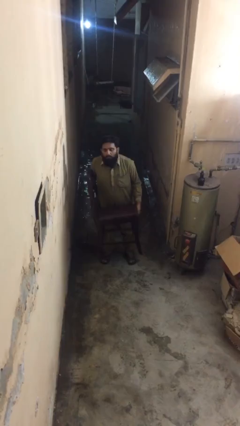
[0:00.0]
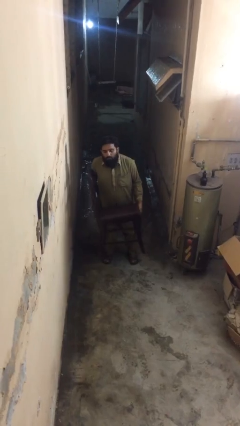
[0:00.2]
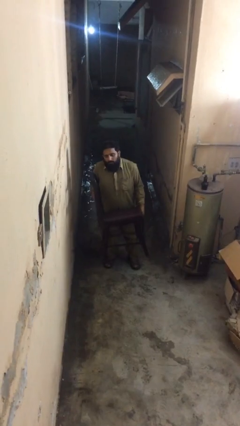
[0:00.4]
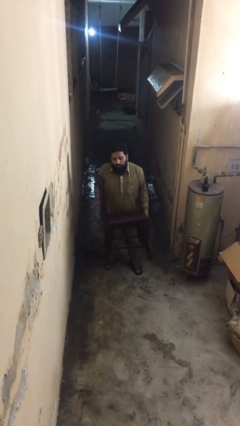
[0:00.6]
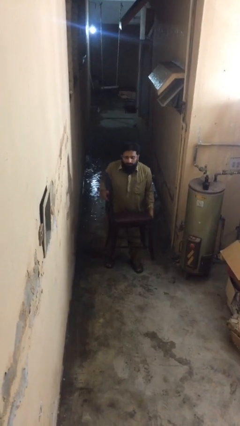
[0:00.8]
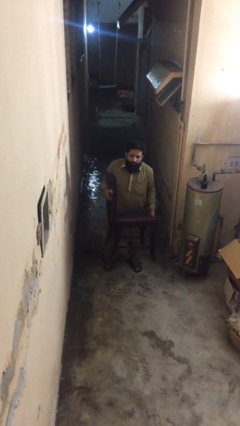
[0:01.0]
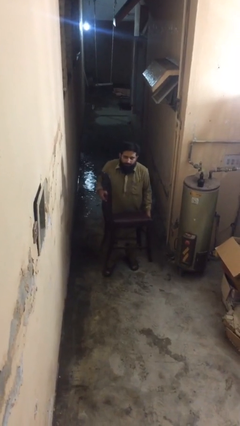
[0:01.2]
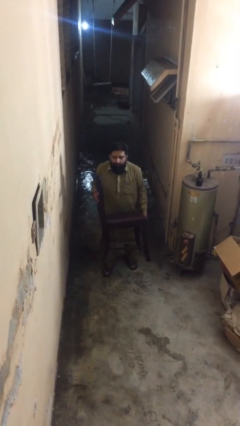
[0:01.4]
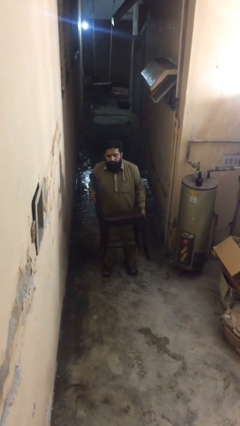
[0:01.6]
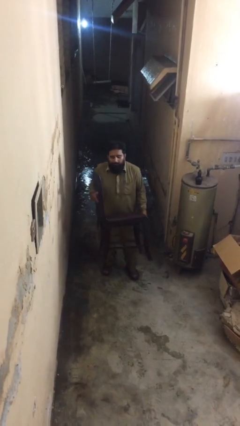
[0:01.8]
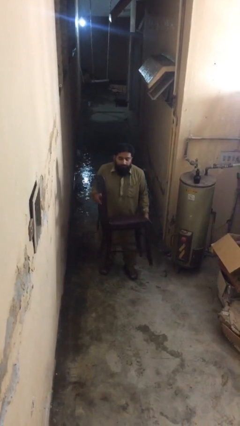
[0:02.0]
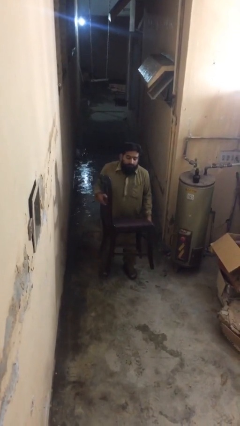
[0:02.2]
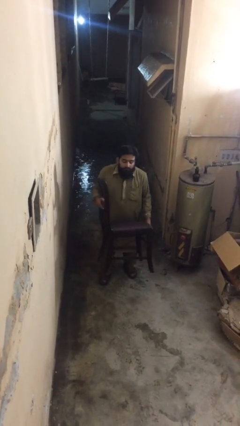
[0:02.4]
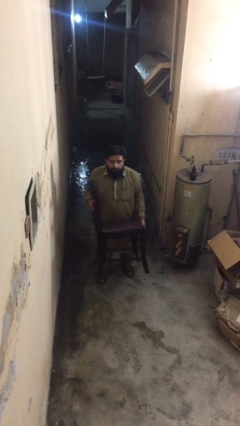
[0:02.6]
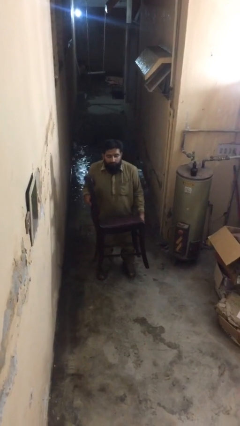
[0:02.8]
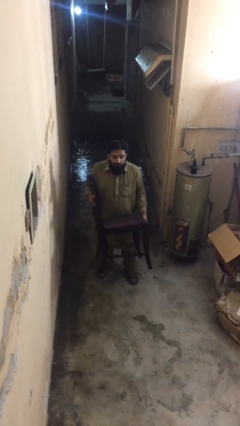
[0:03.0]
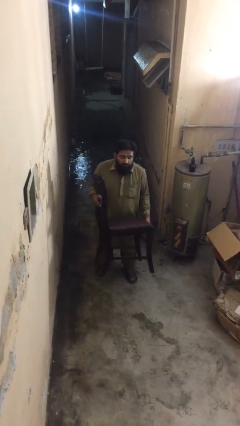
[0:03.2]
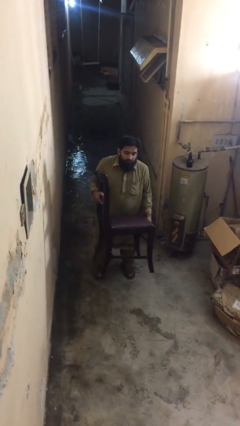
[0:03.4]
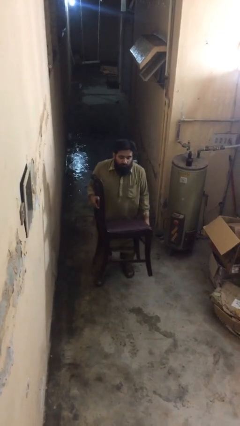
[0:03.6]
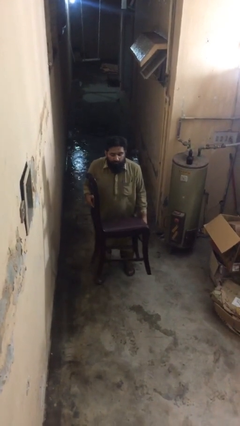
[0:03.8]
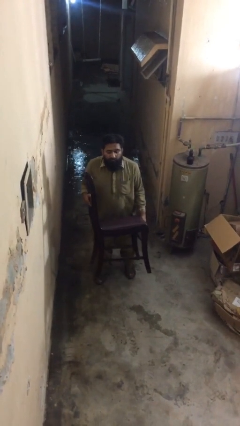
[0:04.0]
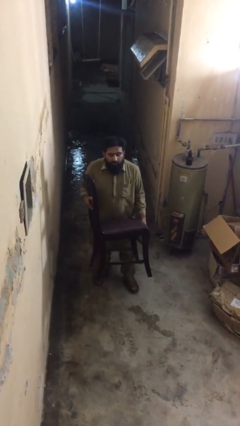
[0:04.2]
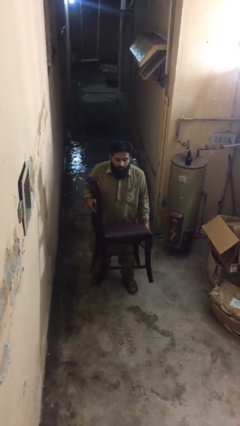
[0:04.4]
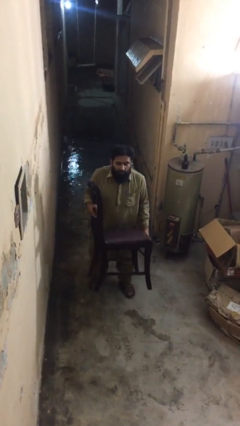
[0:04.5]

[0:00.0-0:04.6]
person carries heavy object

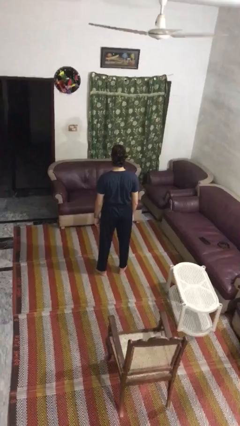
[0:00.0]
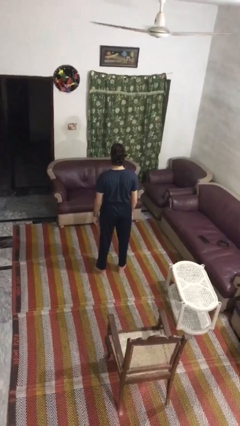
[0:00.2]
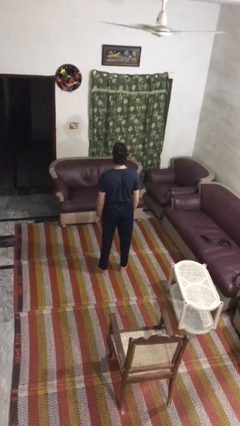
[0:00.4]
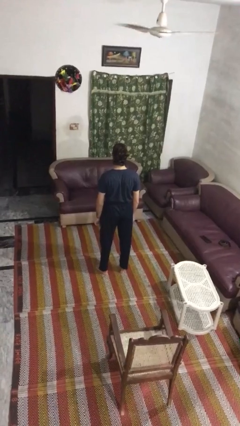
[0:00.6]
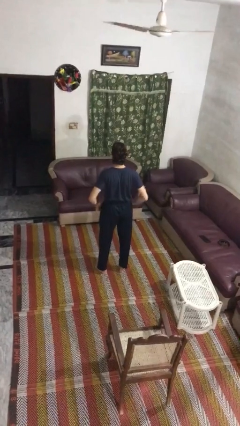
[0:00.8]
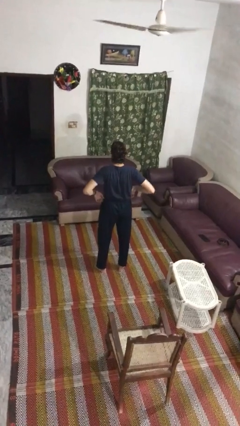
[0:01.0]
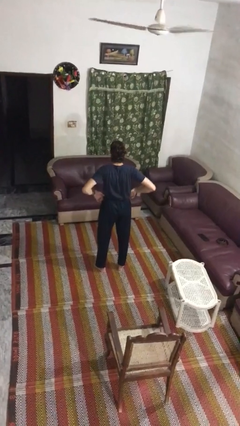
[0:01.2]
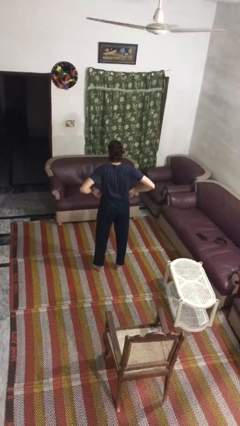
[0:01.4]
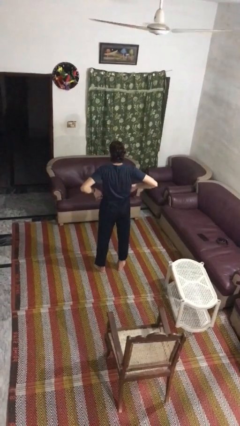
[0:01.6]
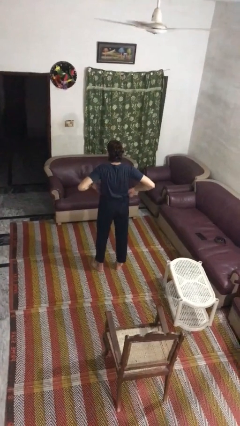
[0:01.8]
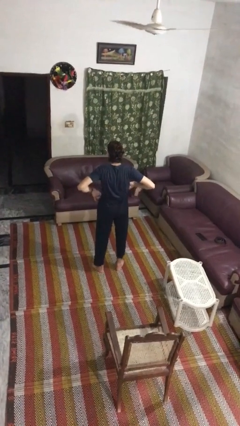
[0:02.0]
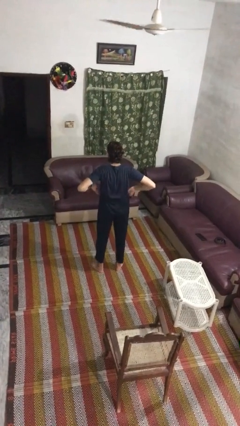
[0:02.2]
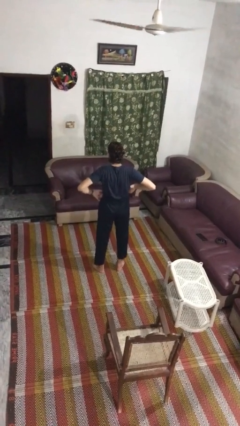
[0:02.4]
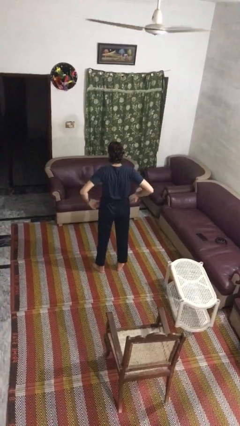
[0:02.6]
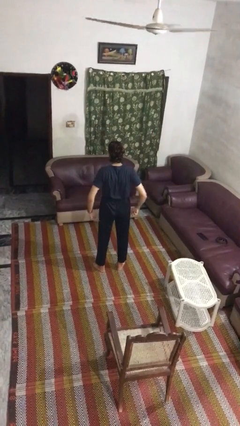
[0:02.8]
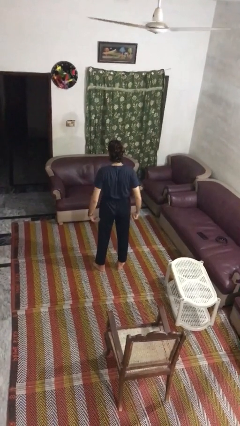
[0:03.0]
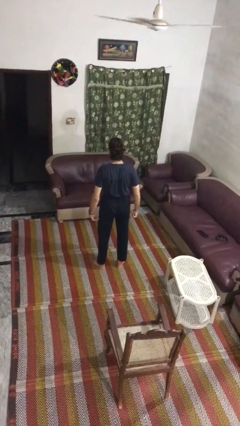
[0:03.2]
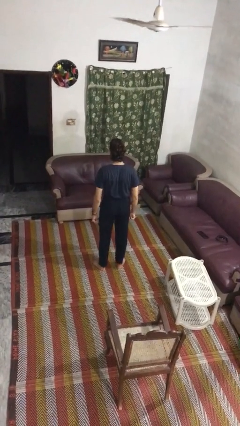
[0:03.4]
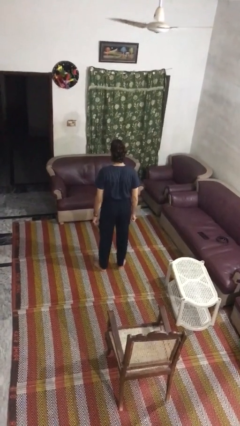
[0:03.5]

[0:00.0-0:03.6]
person hikes up pants

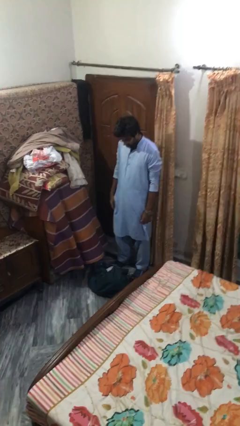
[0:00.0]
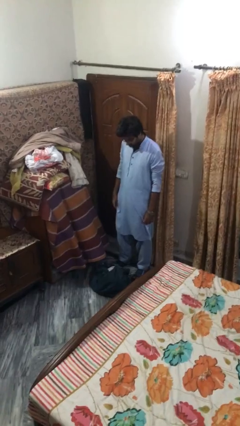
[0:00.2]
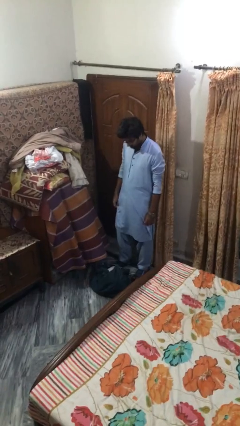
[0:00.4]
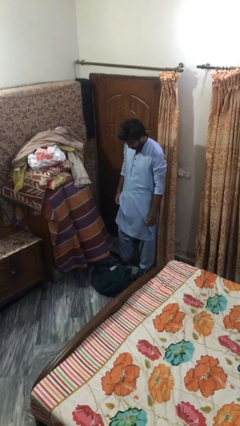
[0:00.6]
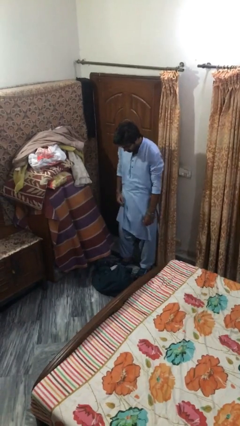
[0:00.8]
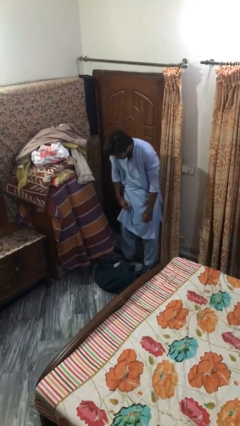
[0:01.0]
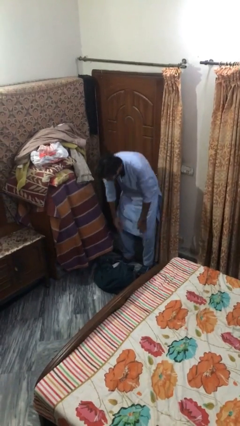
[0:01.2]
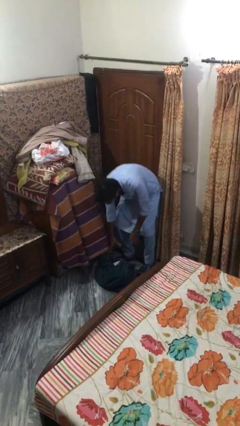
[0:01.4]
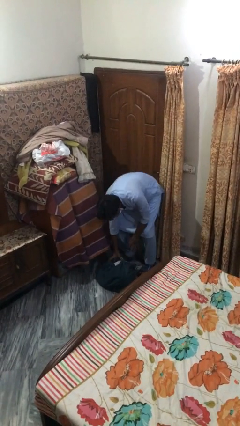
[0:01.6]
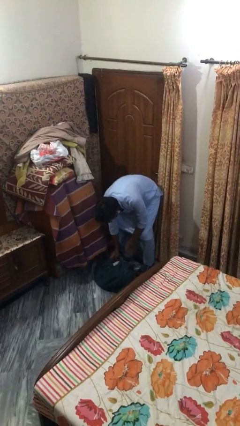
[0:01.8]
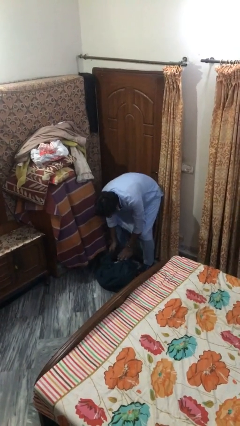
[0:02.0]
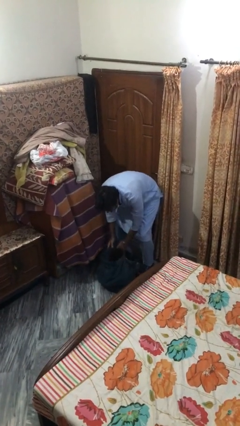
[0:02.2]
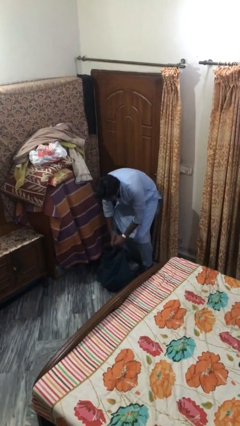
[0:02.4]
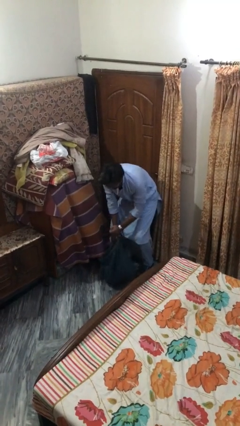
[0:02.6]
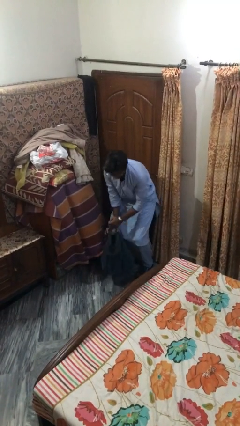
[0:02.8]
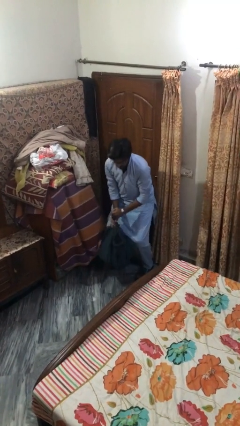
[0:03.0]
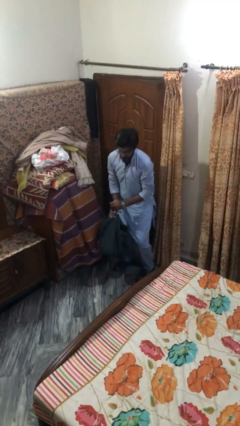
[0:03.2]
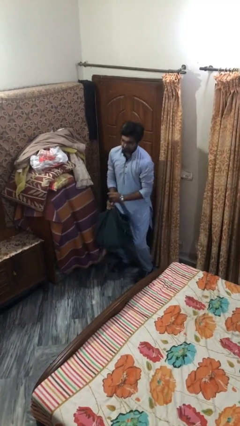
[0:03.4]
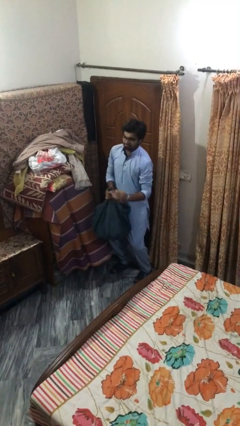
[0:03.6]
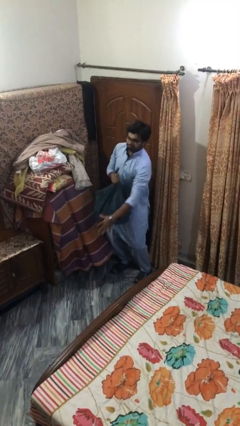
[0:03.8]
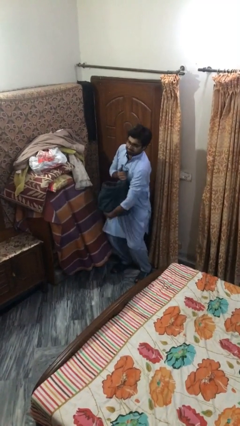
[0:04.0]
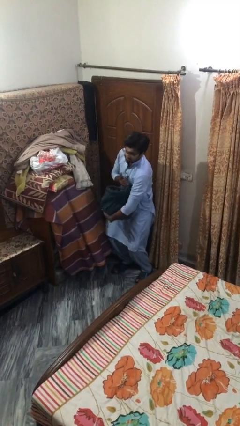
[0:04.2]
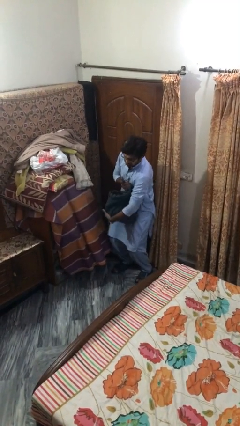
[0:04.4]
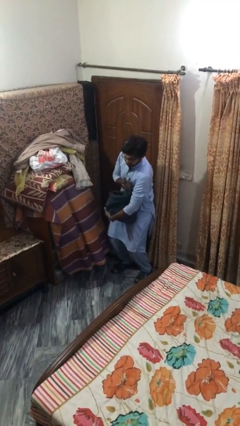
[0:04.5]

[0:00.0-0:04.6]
person picks up object from floor

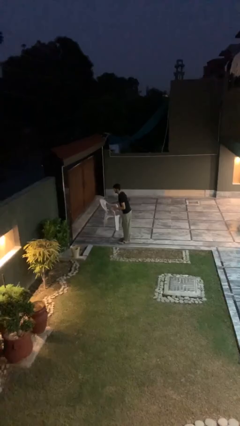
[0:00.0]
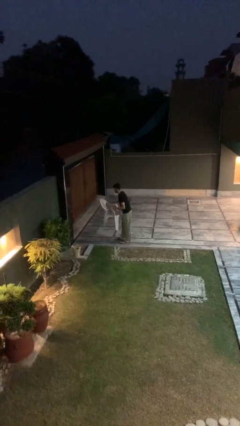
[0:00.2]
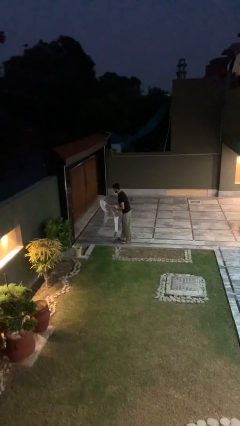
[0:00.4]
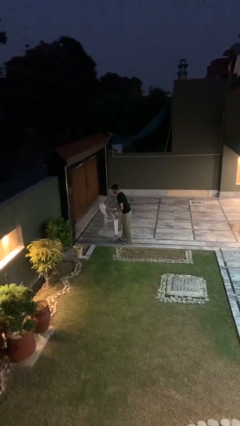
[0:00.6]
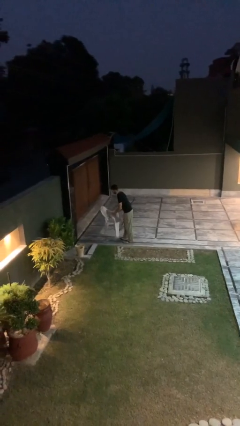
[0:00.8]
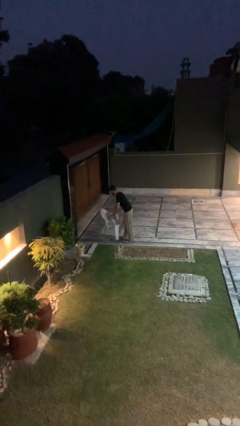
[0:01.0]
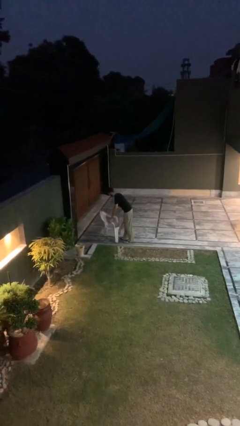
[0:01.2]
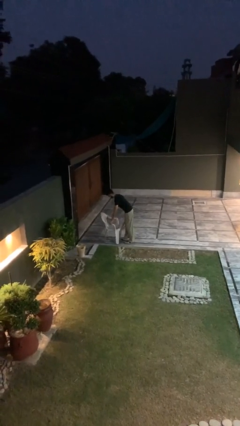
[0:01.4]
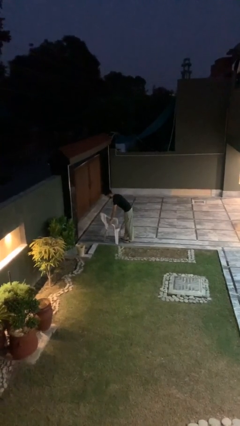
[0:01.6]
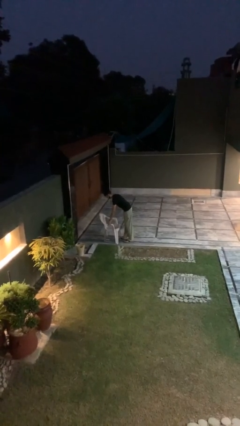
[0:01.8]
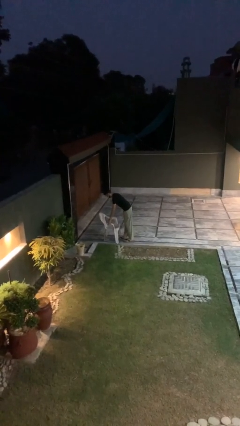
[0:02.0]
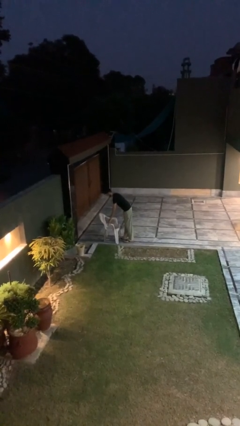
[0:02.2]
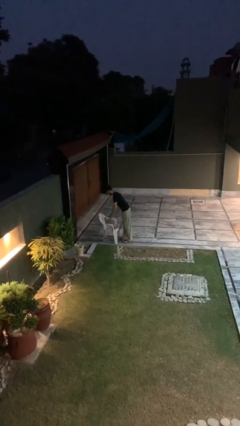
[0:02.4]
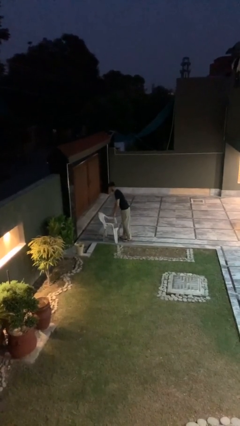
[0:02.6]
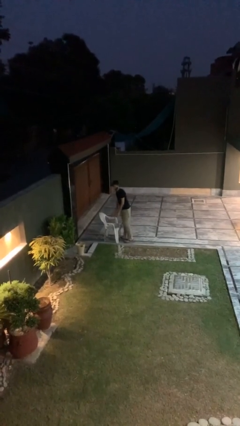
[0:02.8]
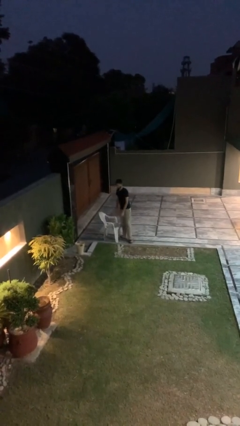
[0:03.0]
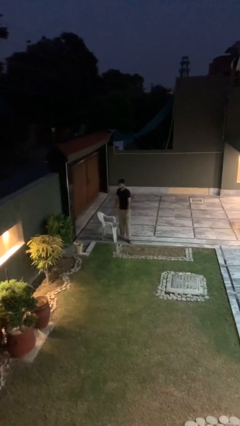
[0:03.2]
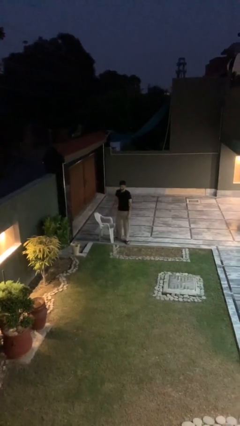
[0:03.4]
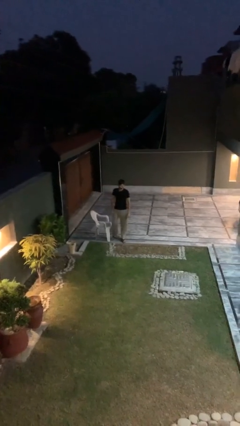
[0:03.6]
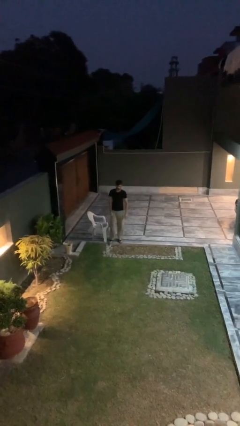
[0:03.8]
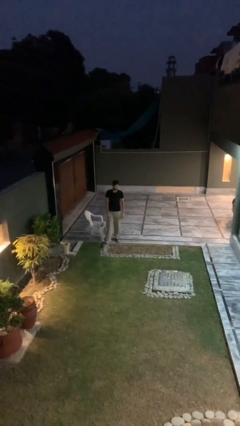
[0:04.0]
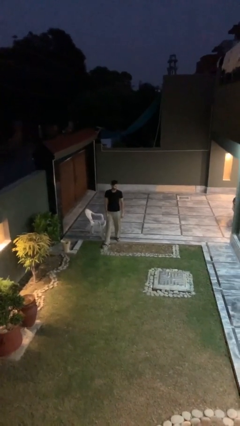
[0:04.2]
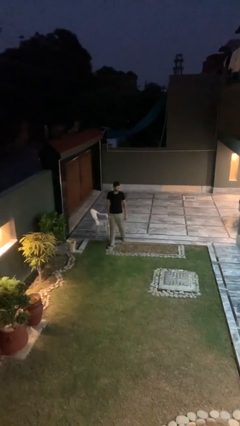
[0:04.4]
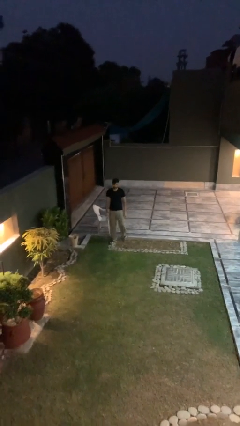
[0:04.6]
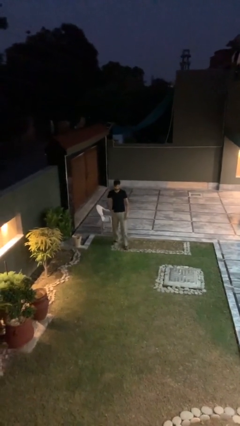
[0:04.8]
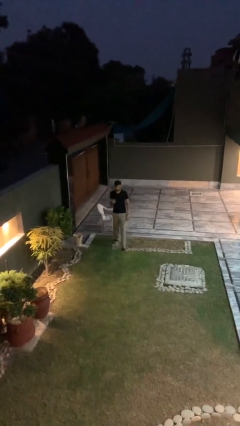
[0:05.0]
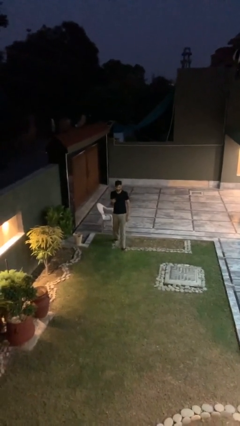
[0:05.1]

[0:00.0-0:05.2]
person puts down object on floor
